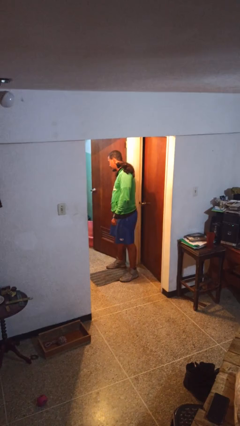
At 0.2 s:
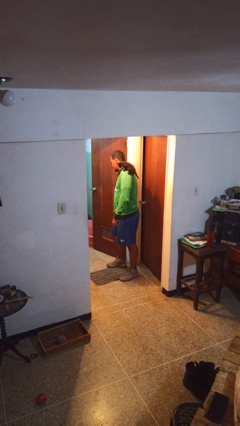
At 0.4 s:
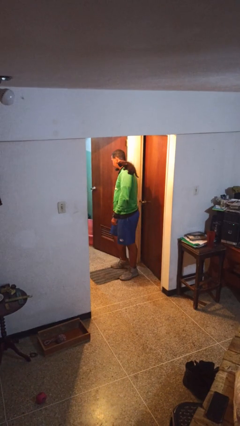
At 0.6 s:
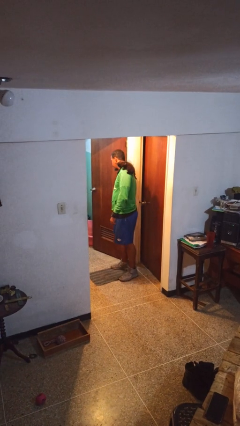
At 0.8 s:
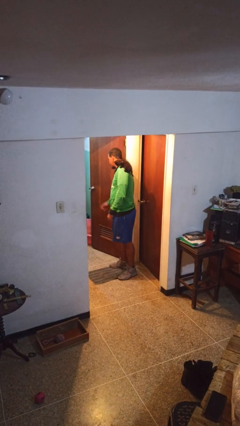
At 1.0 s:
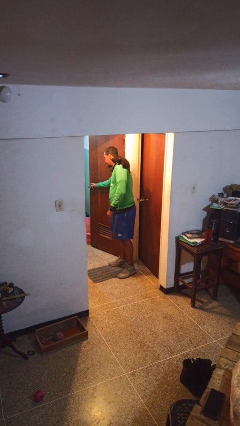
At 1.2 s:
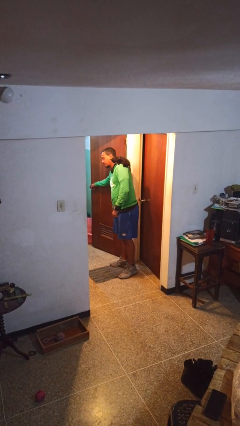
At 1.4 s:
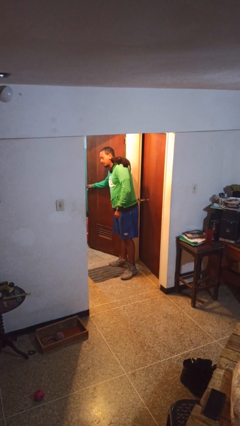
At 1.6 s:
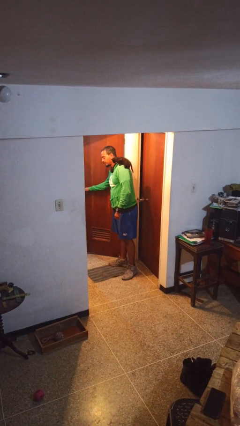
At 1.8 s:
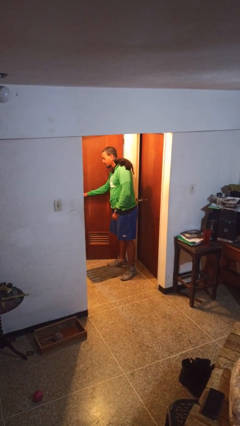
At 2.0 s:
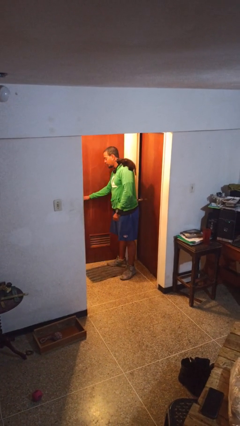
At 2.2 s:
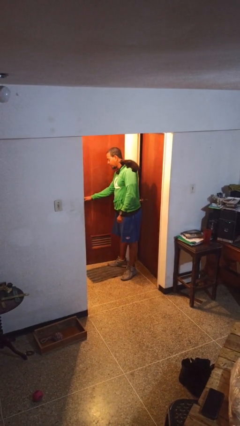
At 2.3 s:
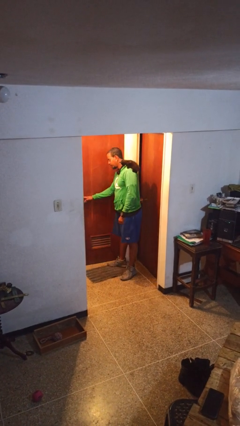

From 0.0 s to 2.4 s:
person closes facility door

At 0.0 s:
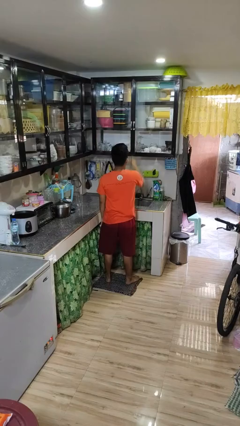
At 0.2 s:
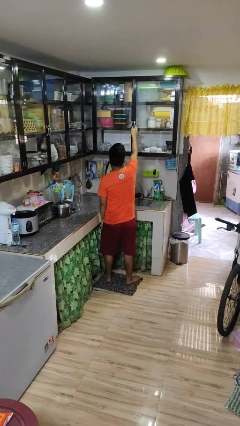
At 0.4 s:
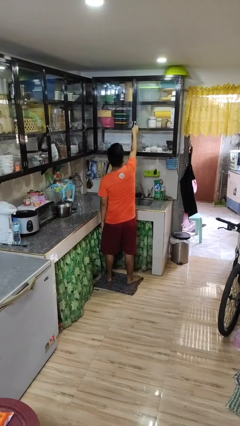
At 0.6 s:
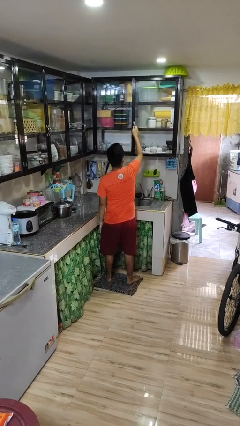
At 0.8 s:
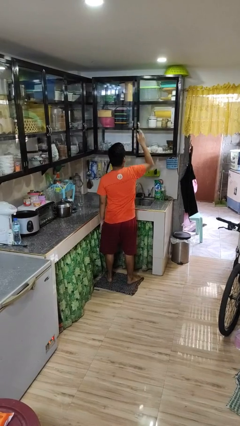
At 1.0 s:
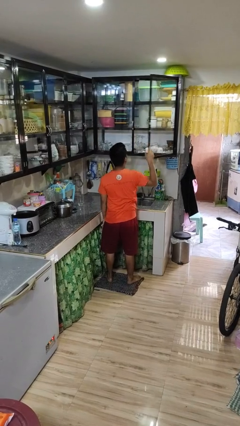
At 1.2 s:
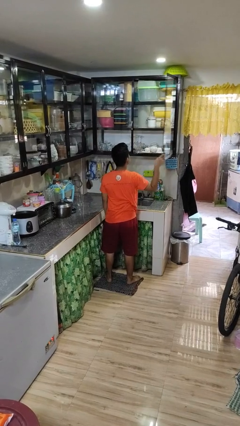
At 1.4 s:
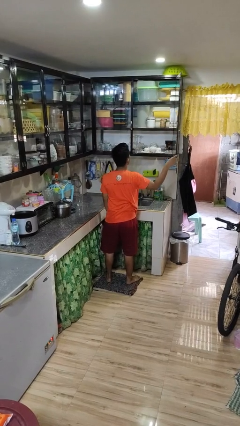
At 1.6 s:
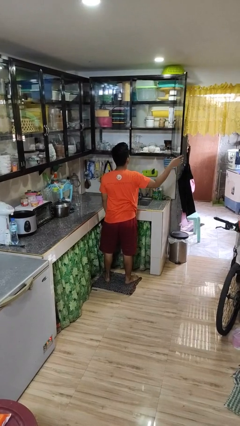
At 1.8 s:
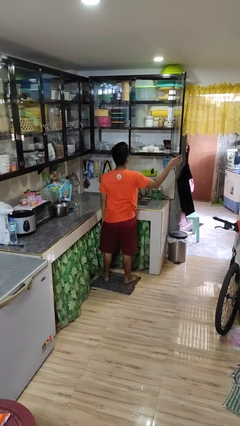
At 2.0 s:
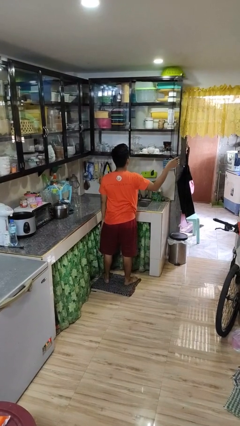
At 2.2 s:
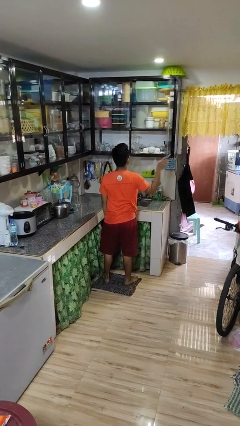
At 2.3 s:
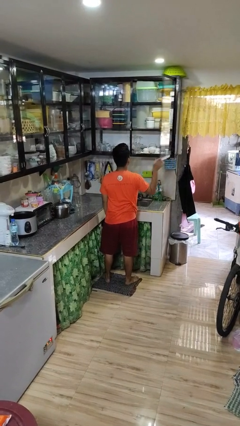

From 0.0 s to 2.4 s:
person opens cabinet

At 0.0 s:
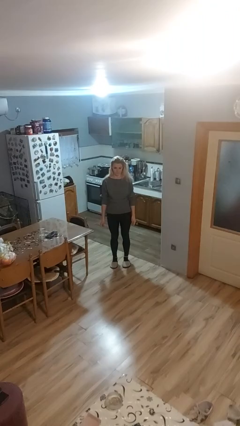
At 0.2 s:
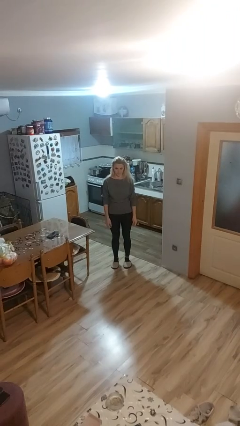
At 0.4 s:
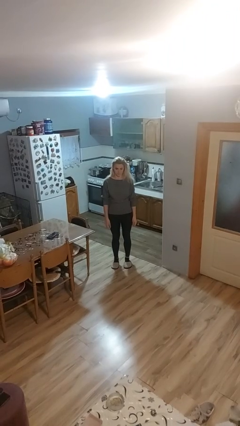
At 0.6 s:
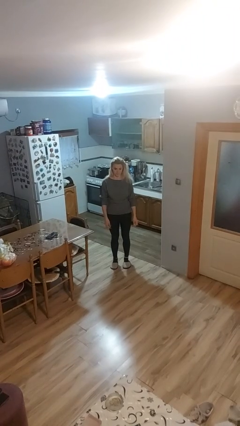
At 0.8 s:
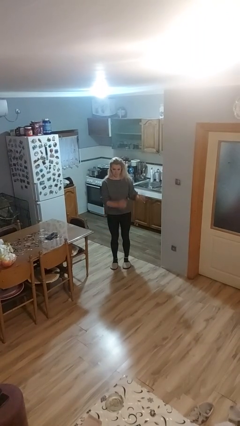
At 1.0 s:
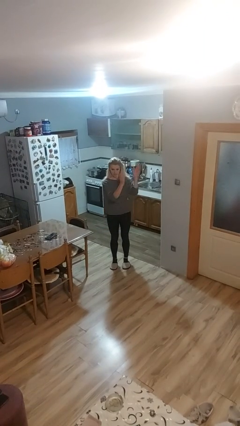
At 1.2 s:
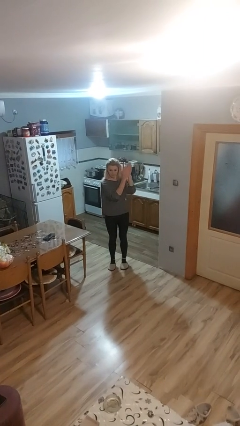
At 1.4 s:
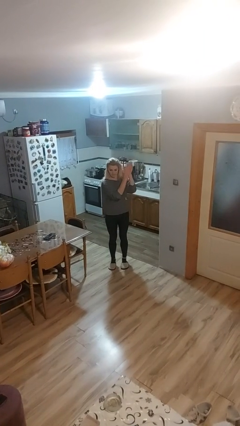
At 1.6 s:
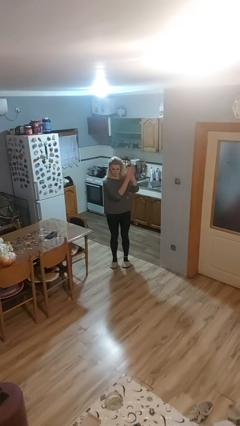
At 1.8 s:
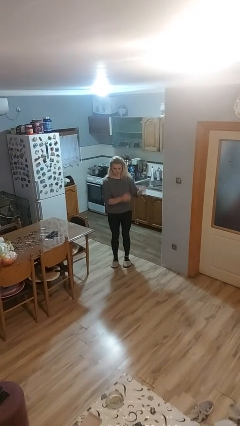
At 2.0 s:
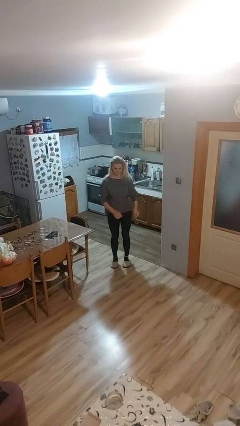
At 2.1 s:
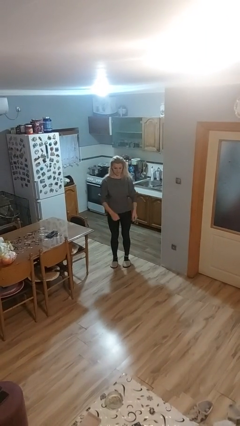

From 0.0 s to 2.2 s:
person claps hands

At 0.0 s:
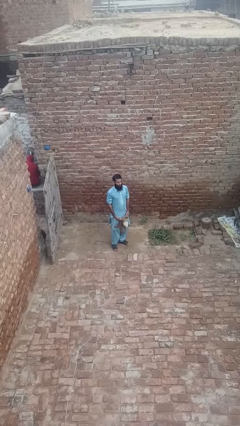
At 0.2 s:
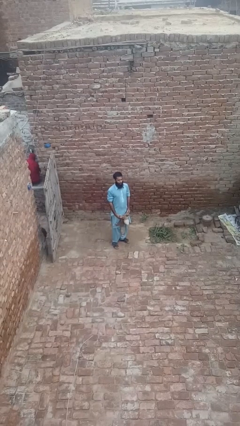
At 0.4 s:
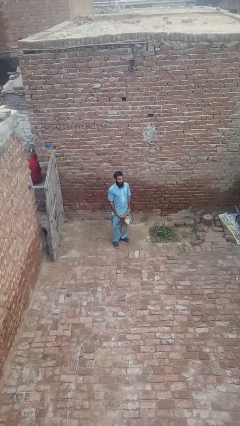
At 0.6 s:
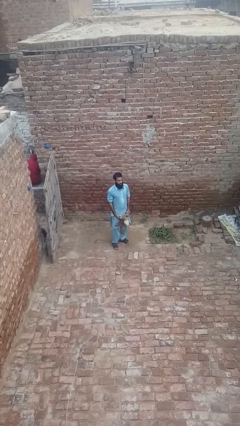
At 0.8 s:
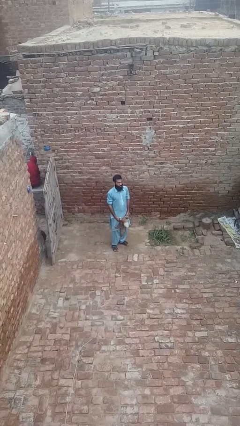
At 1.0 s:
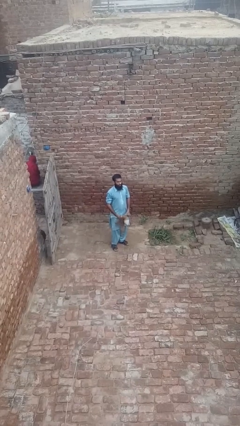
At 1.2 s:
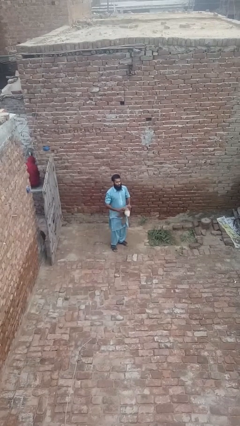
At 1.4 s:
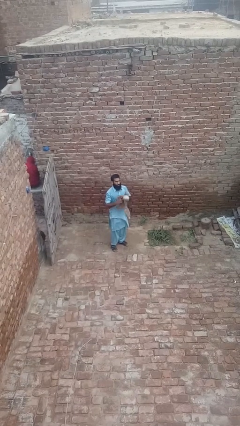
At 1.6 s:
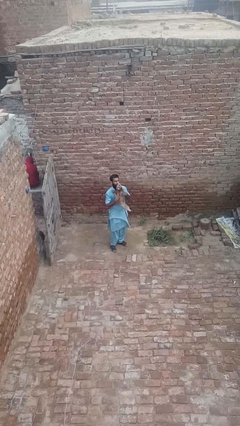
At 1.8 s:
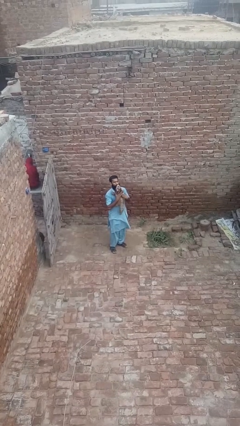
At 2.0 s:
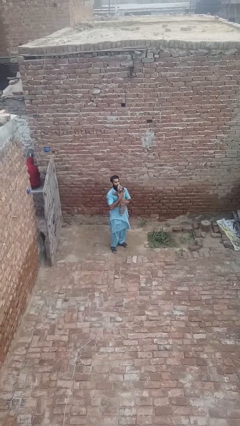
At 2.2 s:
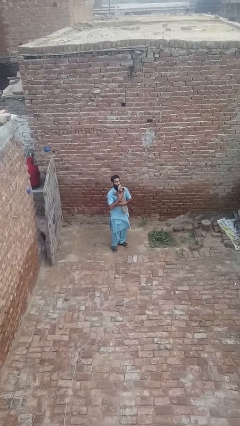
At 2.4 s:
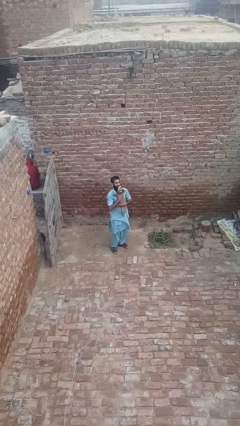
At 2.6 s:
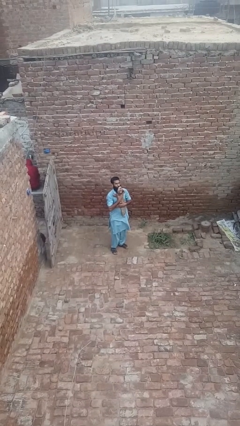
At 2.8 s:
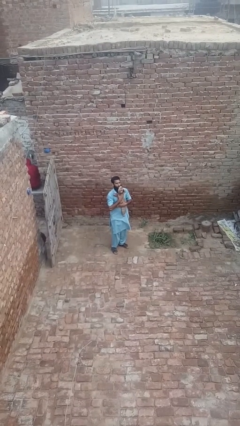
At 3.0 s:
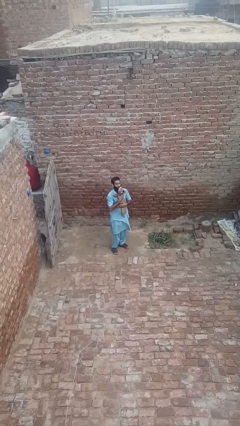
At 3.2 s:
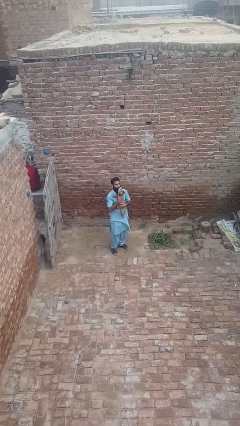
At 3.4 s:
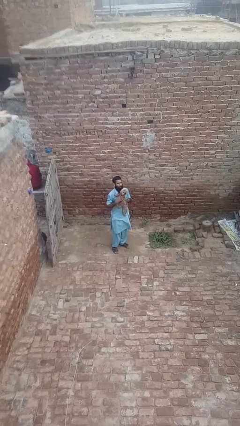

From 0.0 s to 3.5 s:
person hugs stuffed animal

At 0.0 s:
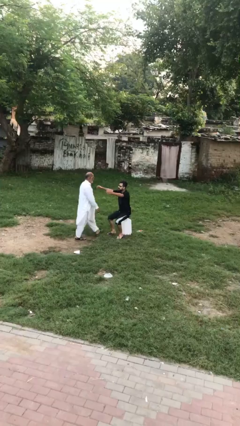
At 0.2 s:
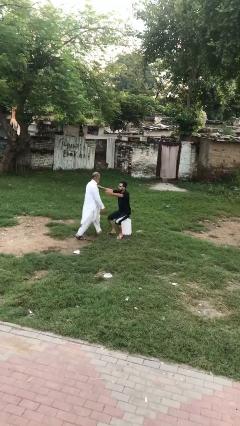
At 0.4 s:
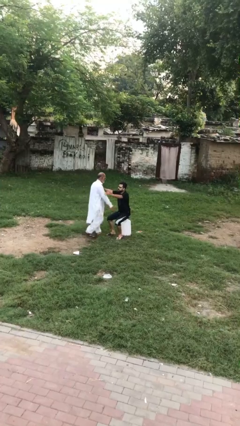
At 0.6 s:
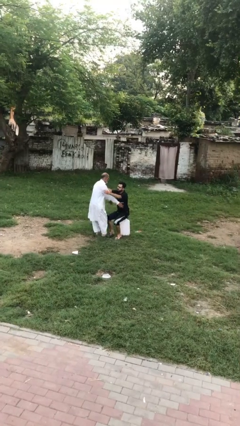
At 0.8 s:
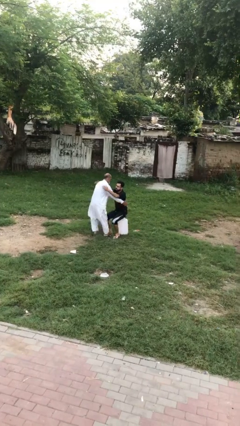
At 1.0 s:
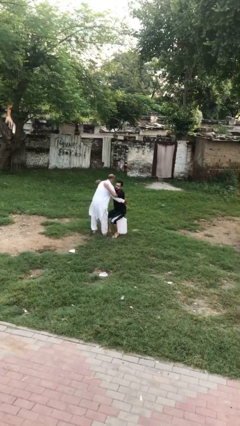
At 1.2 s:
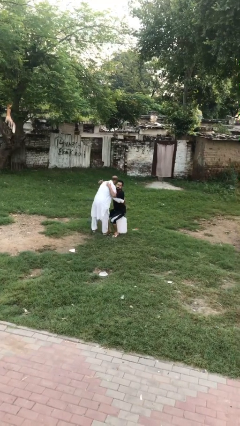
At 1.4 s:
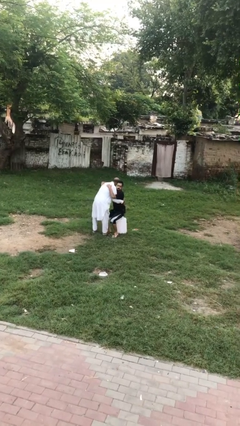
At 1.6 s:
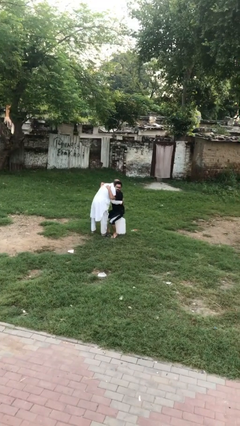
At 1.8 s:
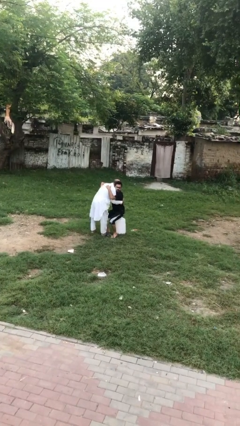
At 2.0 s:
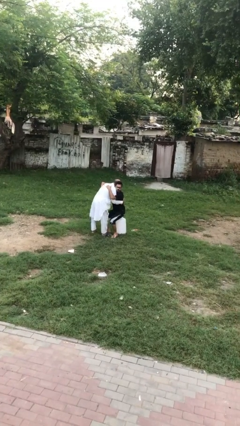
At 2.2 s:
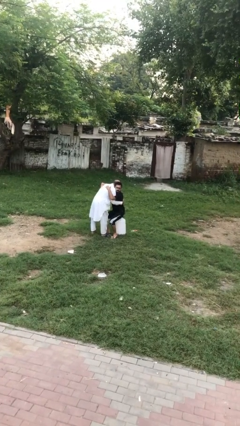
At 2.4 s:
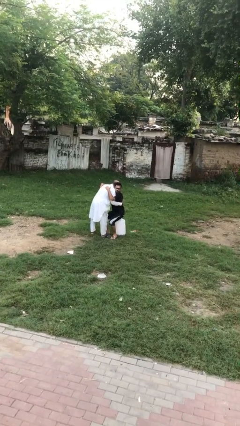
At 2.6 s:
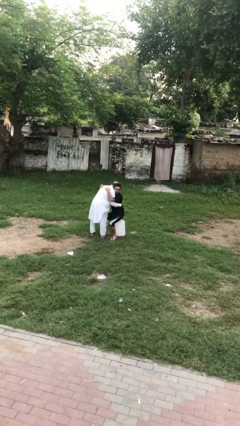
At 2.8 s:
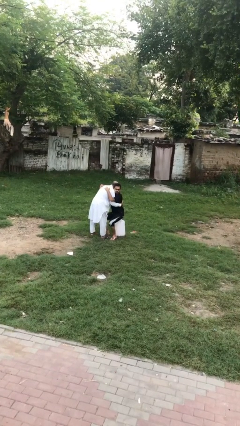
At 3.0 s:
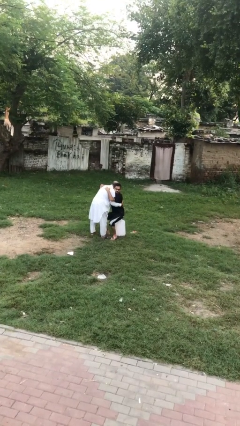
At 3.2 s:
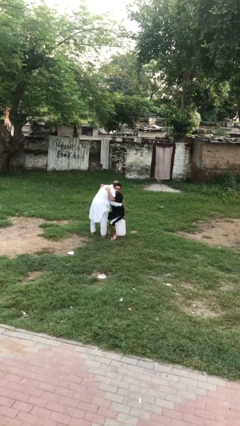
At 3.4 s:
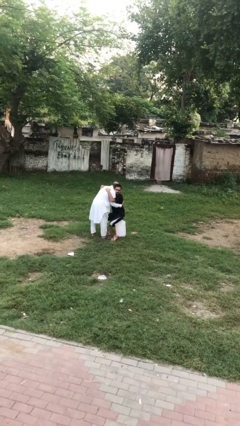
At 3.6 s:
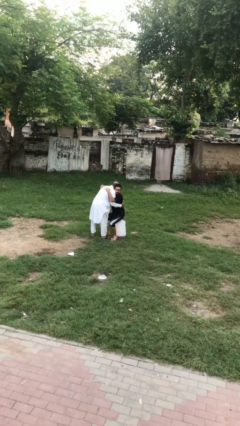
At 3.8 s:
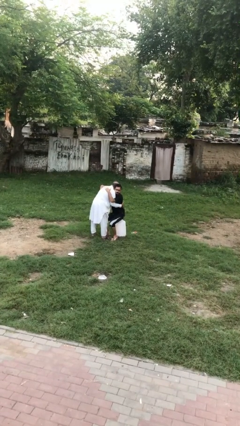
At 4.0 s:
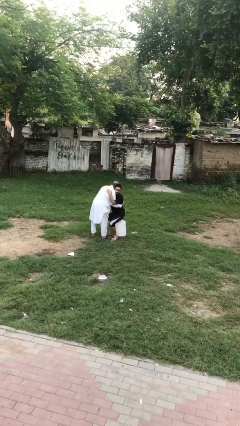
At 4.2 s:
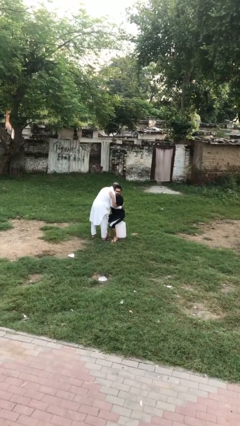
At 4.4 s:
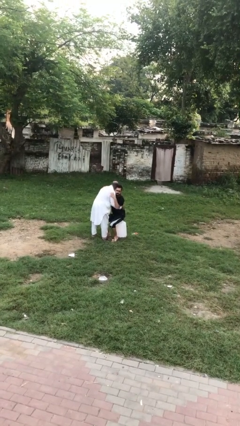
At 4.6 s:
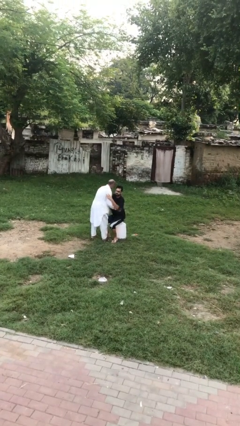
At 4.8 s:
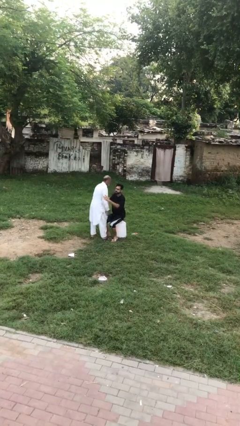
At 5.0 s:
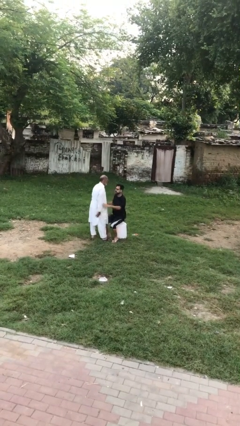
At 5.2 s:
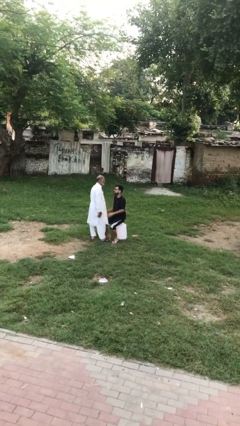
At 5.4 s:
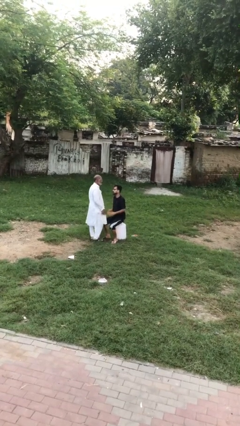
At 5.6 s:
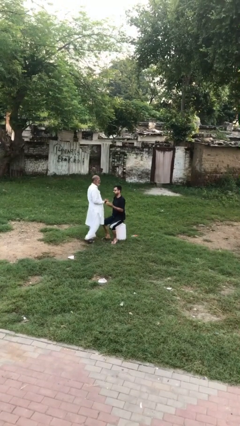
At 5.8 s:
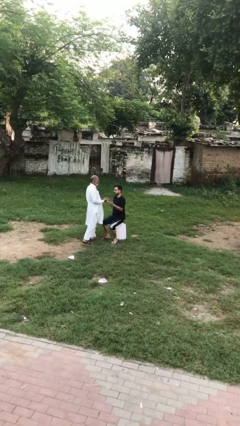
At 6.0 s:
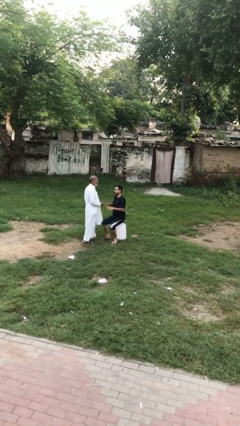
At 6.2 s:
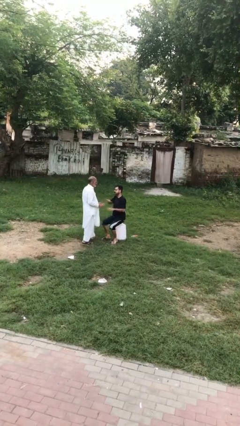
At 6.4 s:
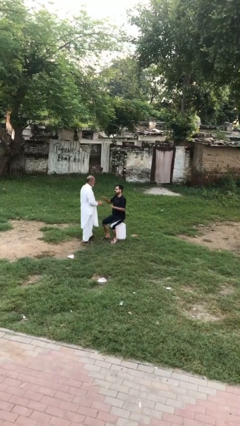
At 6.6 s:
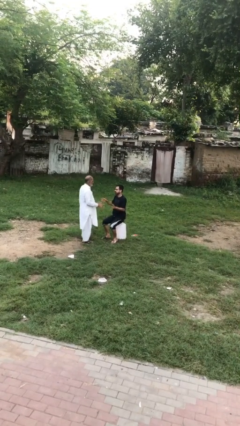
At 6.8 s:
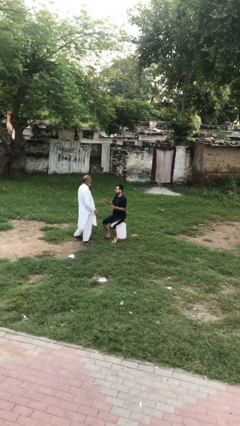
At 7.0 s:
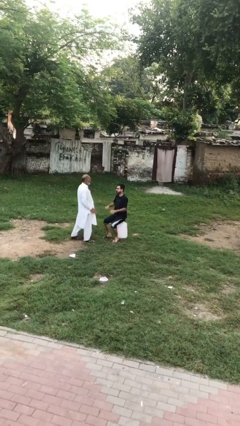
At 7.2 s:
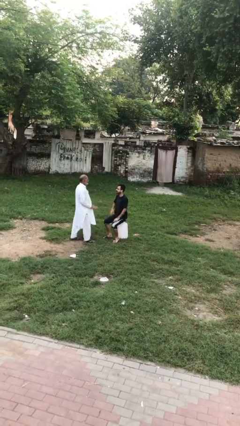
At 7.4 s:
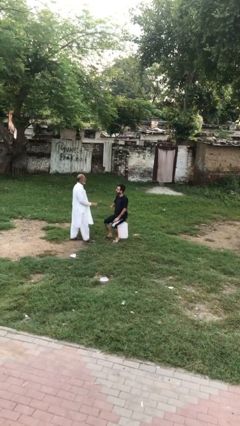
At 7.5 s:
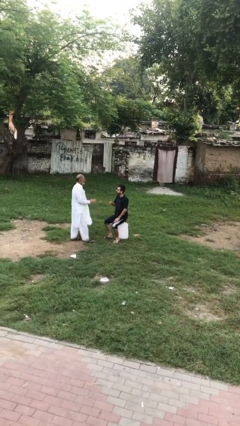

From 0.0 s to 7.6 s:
person embraces person
